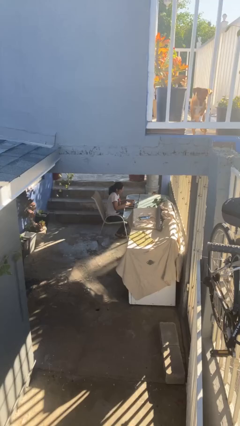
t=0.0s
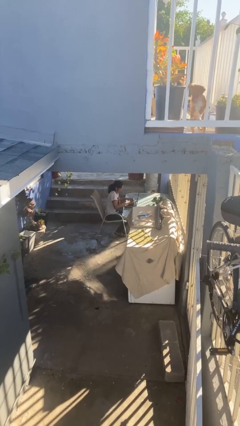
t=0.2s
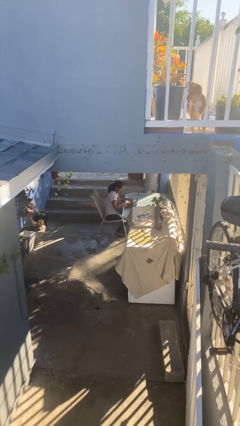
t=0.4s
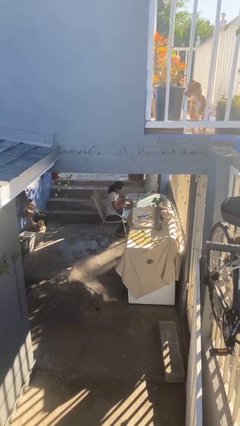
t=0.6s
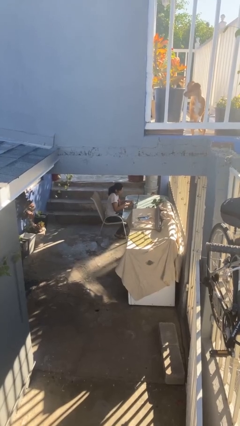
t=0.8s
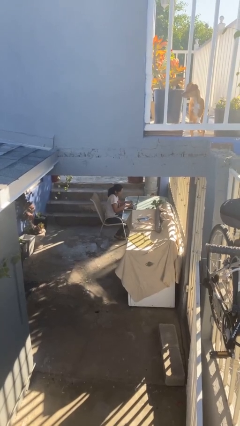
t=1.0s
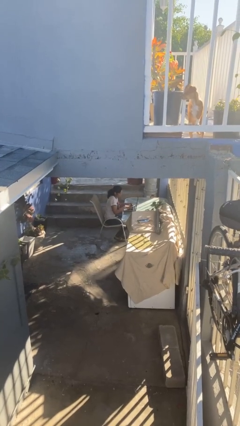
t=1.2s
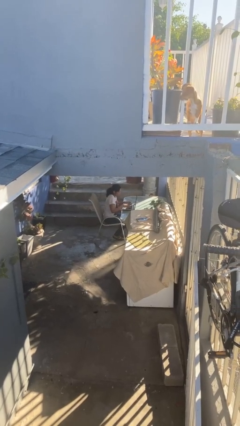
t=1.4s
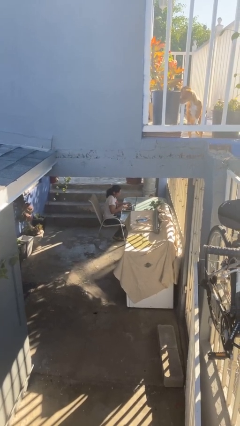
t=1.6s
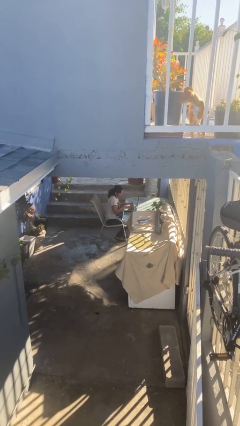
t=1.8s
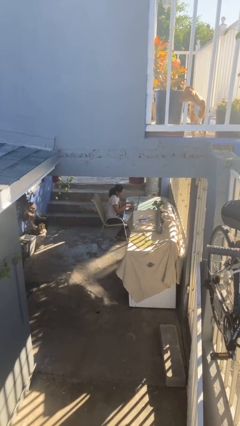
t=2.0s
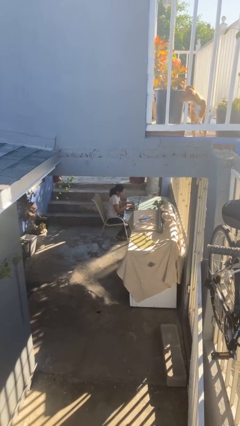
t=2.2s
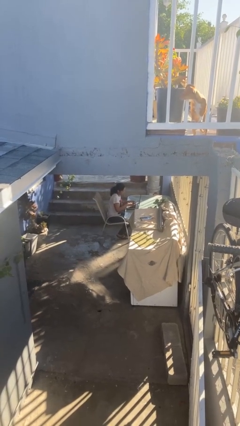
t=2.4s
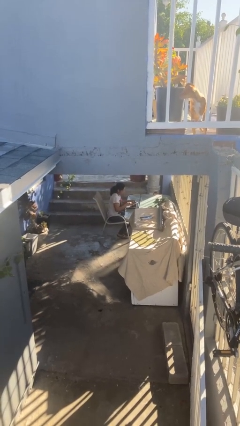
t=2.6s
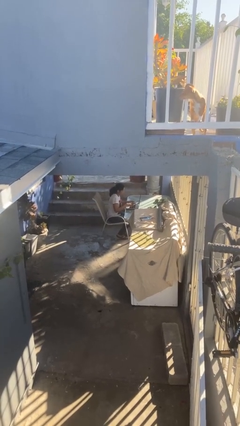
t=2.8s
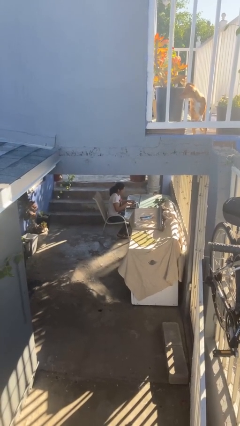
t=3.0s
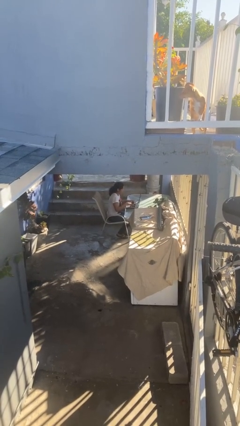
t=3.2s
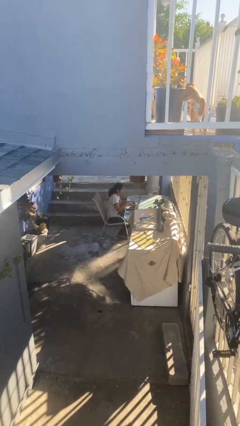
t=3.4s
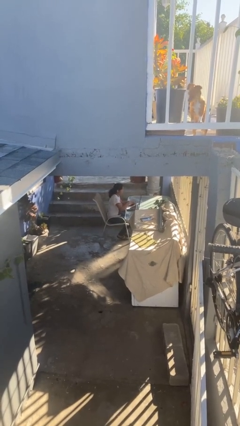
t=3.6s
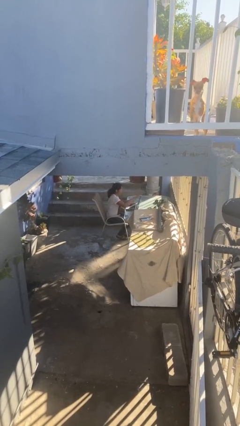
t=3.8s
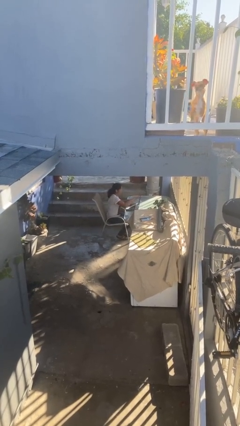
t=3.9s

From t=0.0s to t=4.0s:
person interacts with laptop

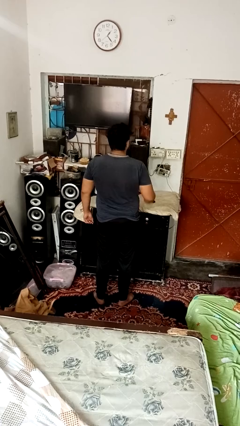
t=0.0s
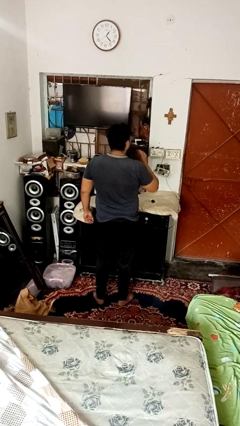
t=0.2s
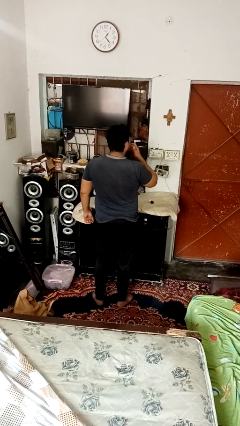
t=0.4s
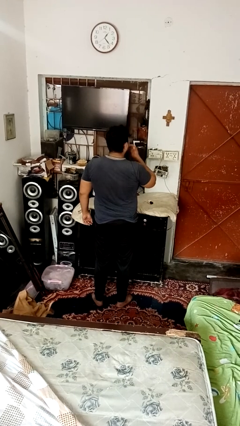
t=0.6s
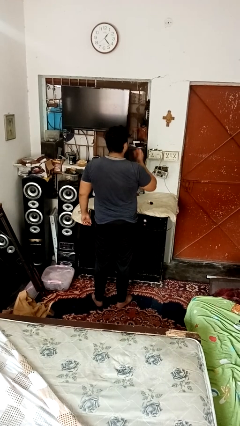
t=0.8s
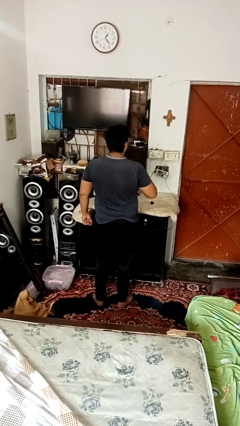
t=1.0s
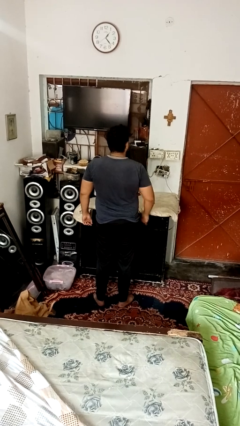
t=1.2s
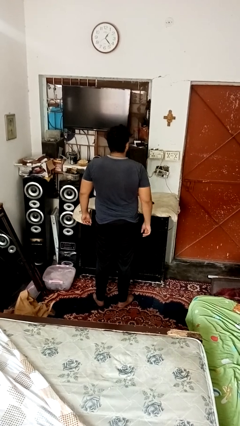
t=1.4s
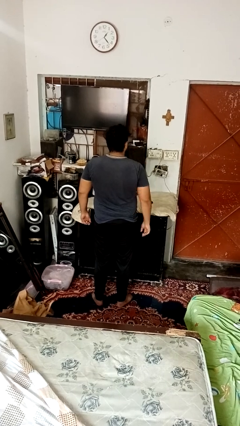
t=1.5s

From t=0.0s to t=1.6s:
person licks fingers

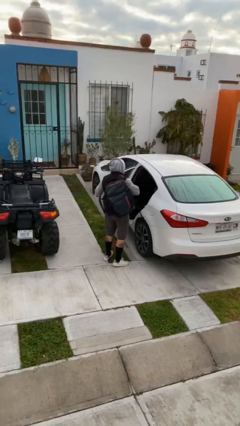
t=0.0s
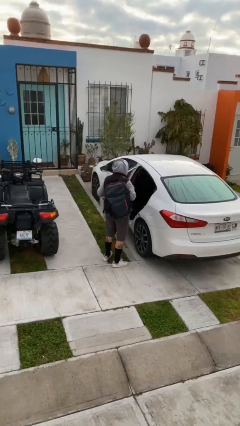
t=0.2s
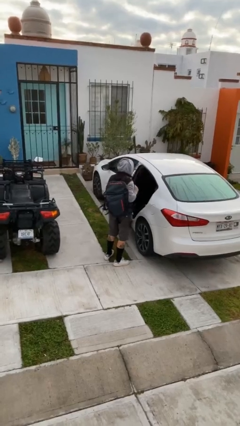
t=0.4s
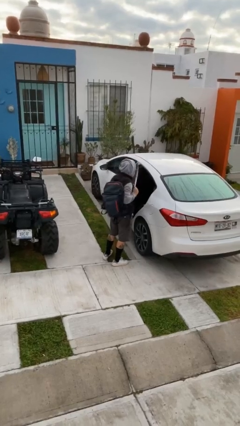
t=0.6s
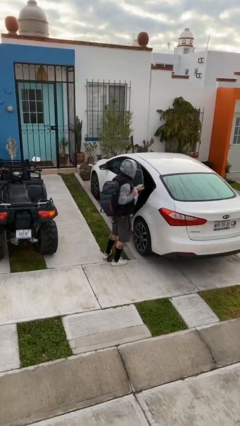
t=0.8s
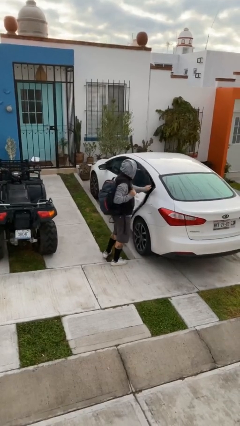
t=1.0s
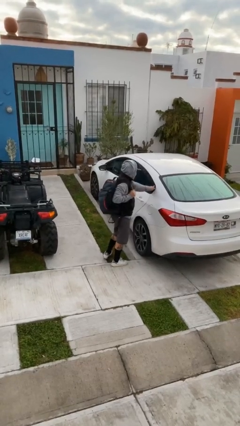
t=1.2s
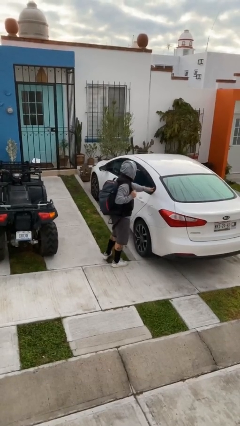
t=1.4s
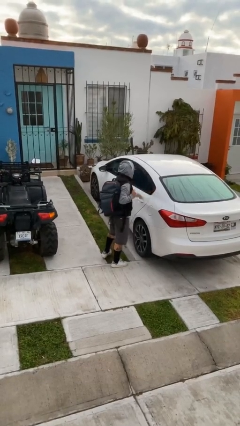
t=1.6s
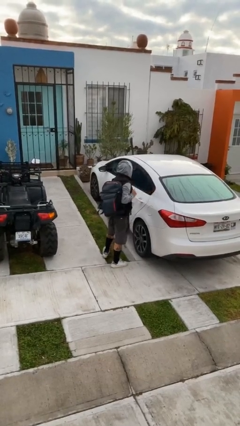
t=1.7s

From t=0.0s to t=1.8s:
person closes car door

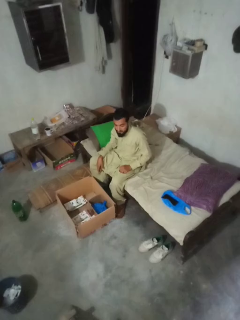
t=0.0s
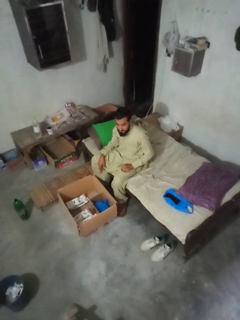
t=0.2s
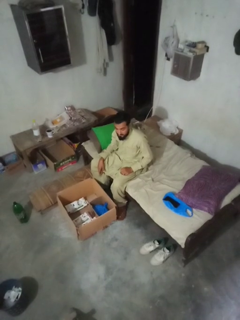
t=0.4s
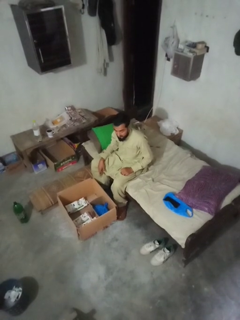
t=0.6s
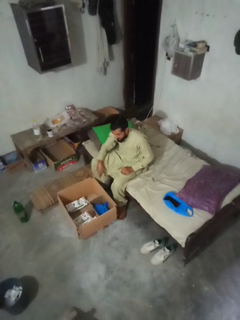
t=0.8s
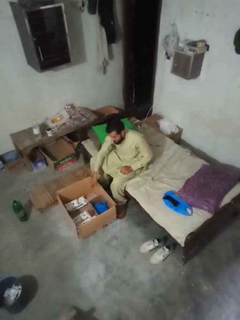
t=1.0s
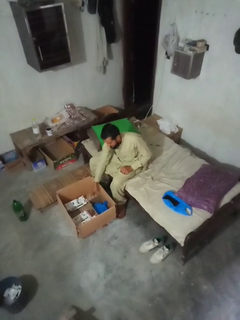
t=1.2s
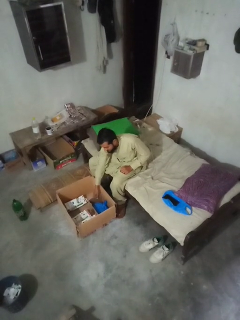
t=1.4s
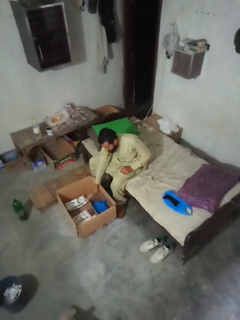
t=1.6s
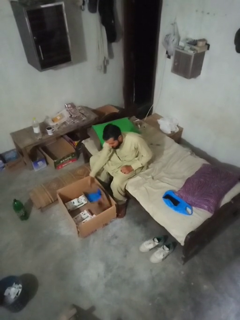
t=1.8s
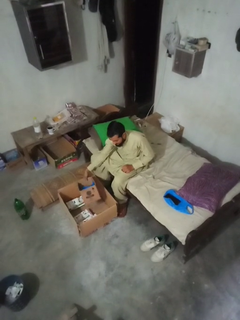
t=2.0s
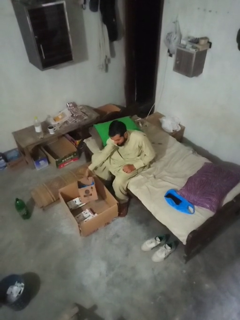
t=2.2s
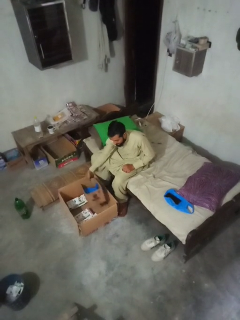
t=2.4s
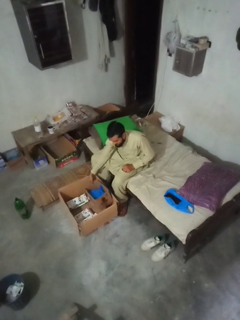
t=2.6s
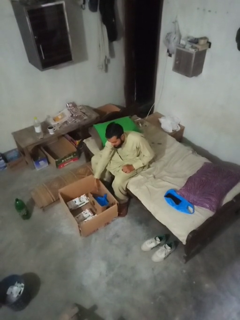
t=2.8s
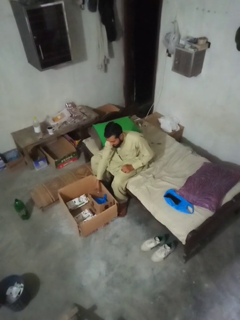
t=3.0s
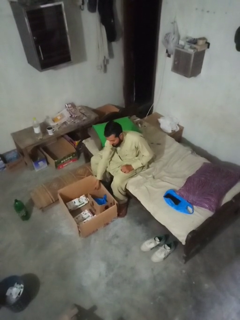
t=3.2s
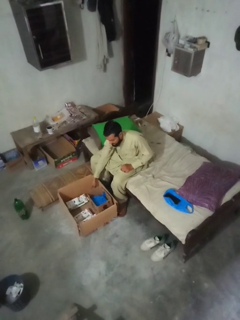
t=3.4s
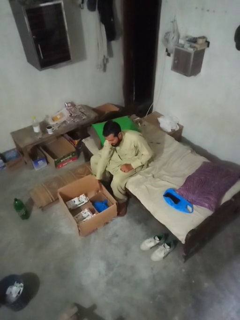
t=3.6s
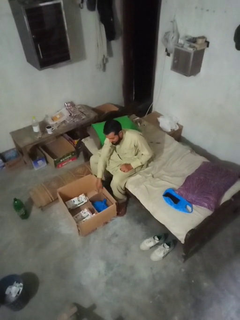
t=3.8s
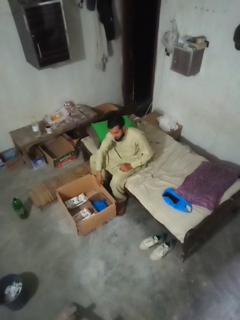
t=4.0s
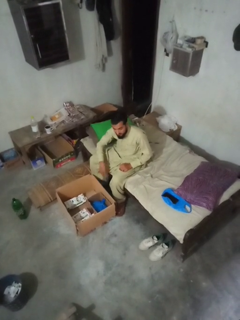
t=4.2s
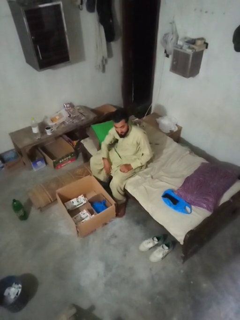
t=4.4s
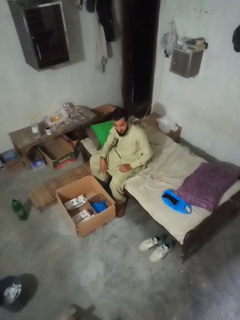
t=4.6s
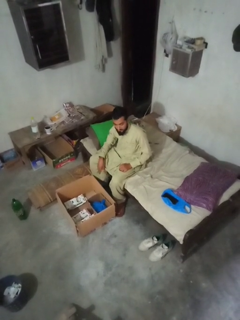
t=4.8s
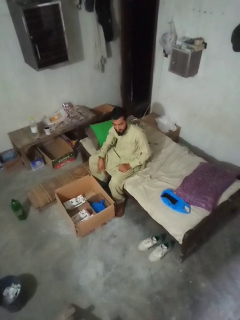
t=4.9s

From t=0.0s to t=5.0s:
person searches in box

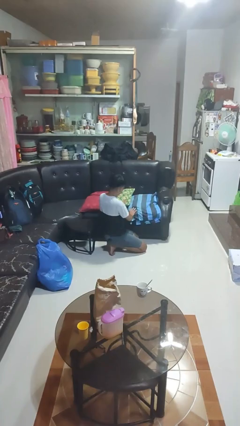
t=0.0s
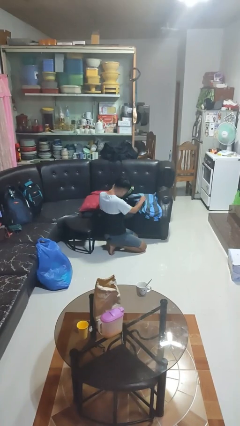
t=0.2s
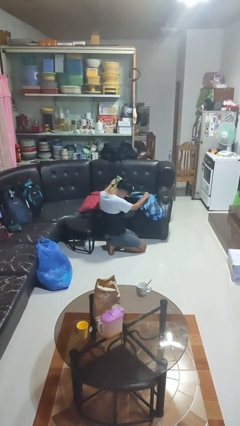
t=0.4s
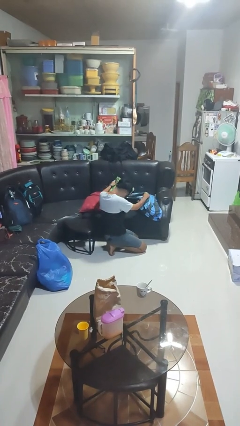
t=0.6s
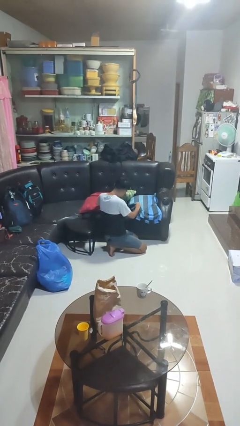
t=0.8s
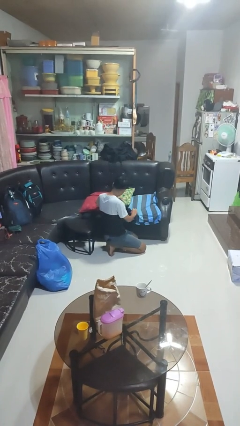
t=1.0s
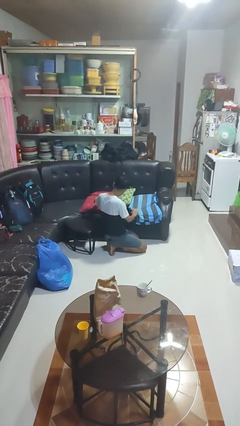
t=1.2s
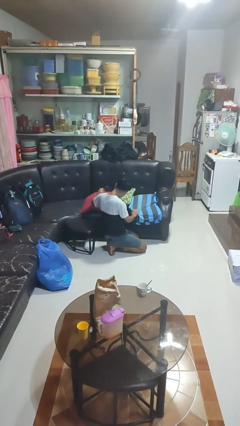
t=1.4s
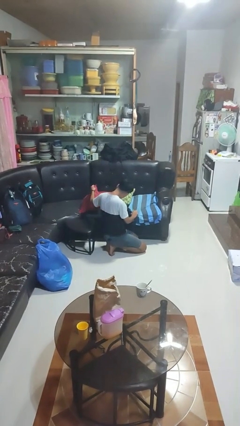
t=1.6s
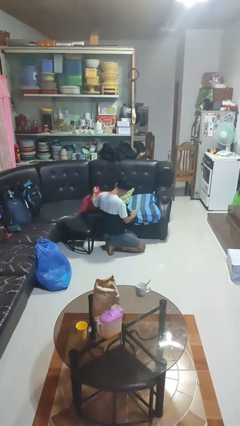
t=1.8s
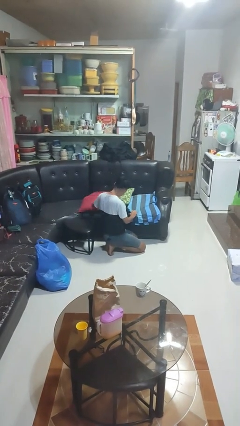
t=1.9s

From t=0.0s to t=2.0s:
person searches in couch

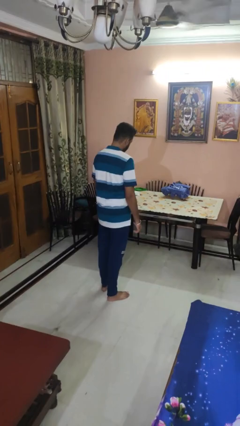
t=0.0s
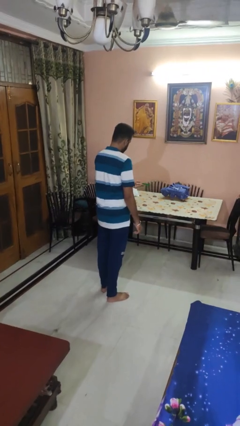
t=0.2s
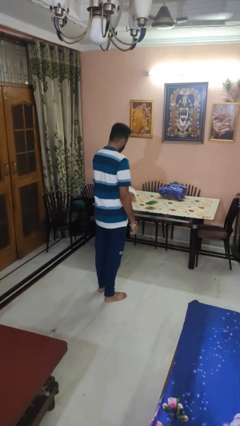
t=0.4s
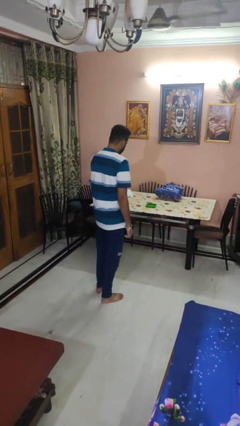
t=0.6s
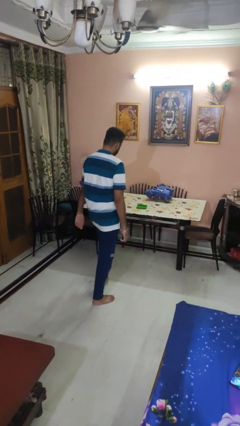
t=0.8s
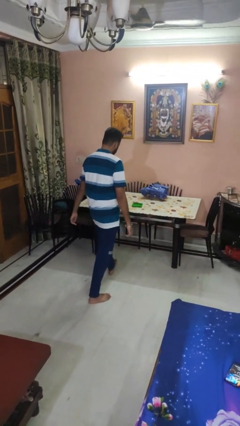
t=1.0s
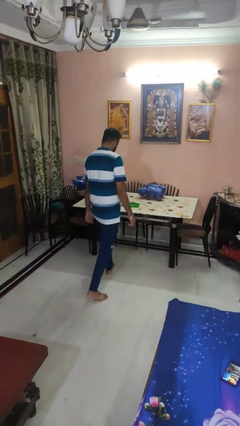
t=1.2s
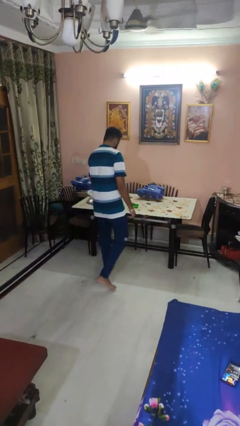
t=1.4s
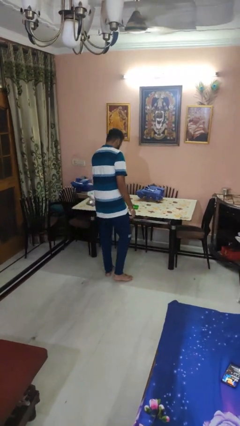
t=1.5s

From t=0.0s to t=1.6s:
person throws object on table

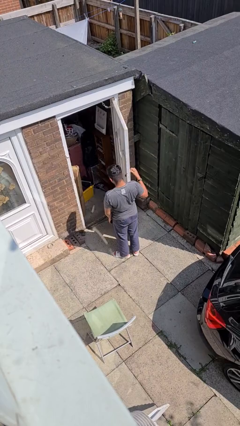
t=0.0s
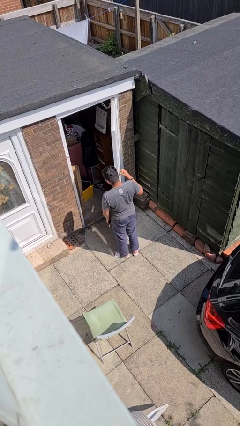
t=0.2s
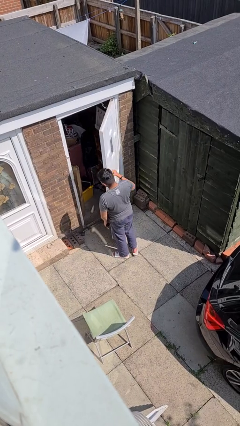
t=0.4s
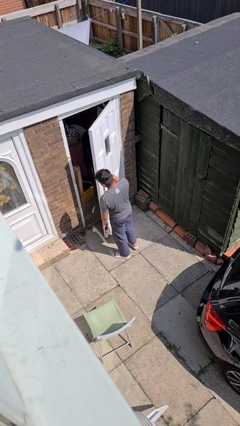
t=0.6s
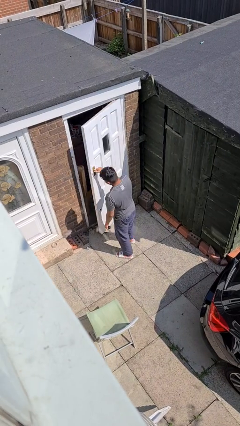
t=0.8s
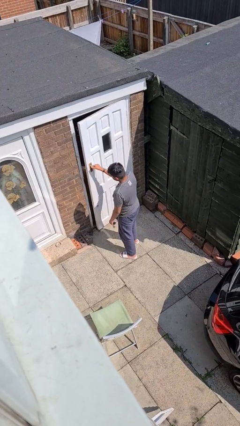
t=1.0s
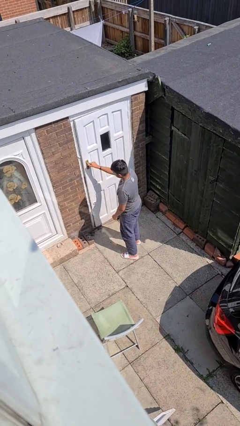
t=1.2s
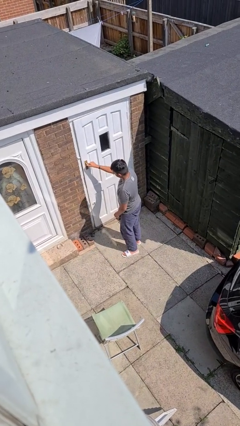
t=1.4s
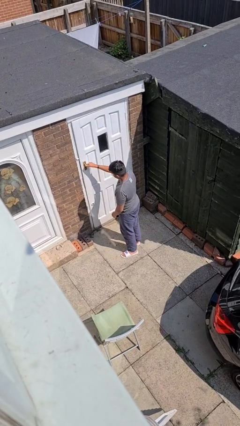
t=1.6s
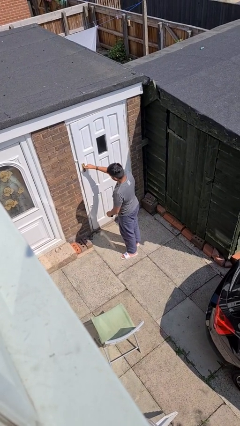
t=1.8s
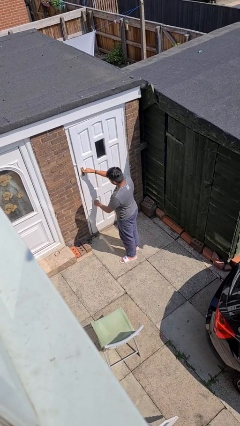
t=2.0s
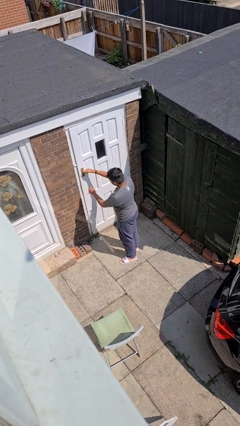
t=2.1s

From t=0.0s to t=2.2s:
person closes facility door

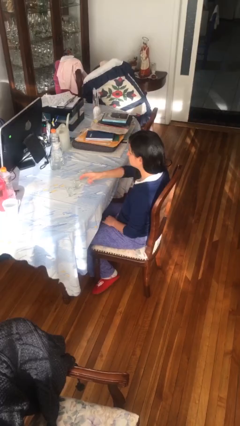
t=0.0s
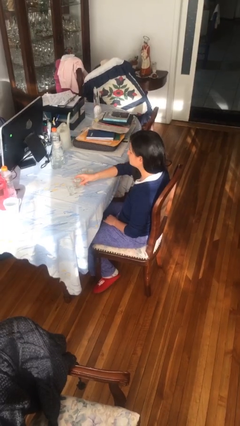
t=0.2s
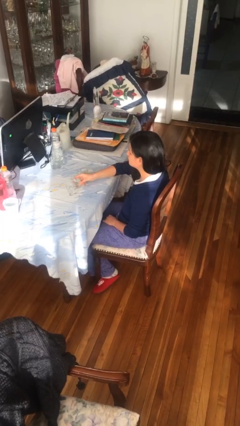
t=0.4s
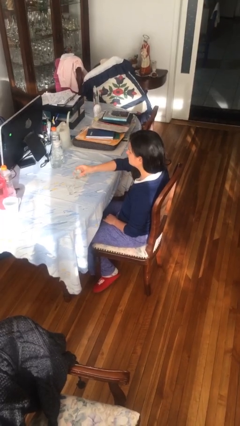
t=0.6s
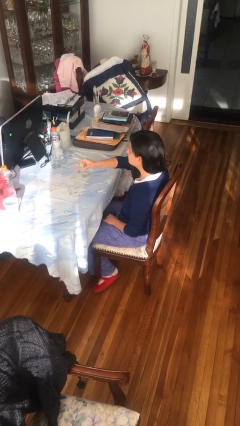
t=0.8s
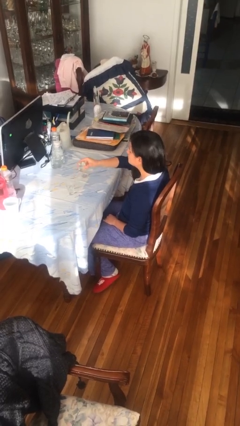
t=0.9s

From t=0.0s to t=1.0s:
person picks up object from table
